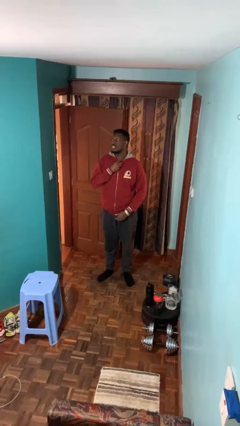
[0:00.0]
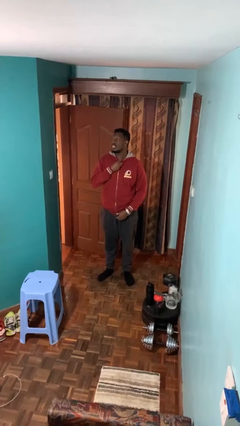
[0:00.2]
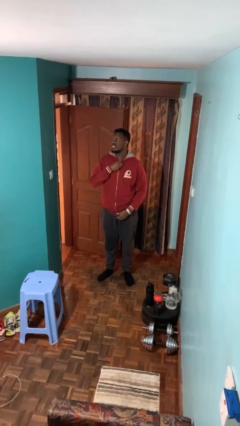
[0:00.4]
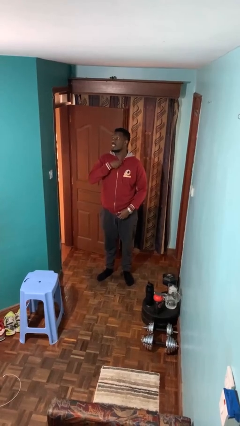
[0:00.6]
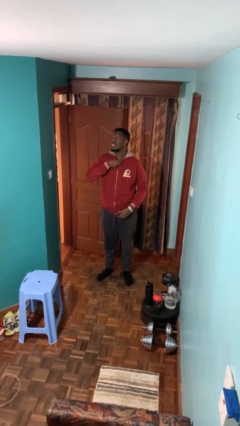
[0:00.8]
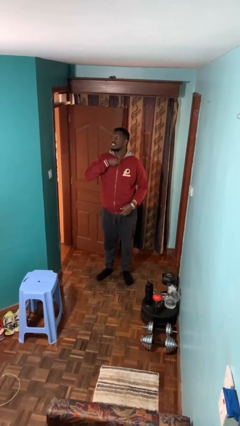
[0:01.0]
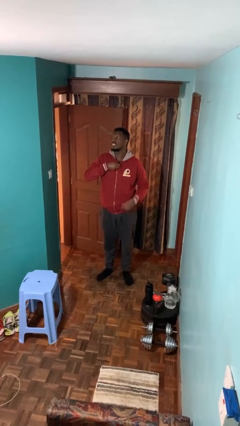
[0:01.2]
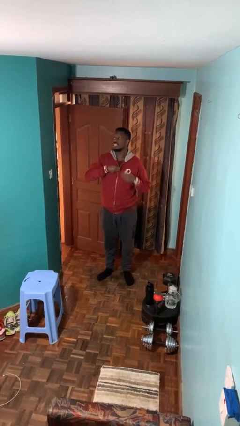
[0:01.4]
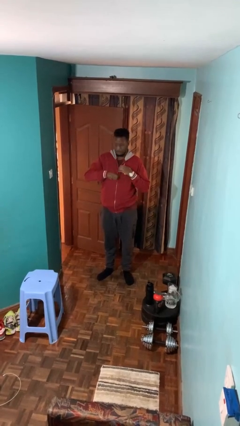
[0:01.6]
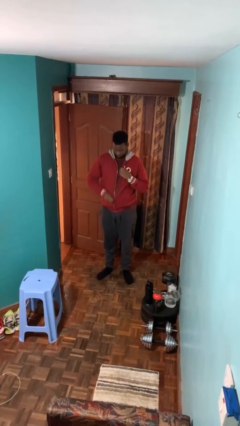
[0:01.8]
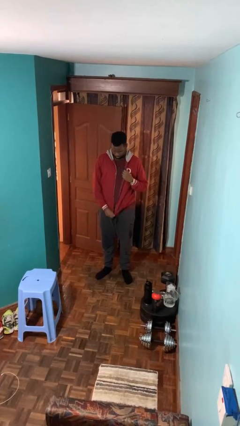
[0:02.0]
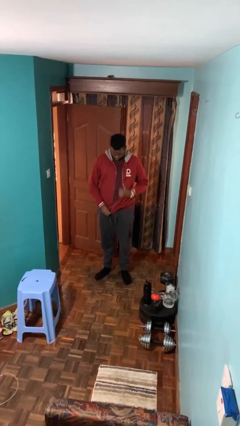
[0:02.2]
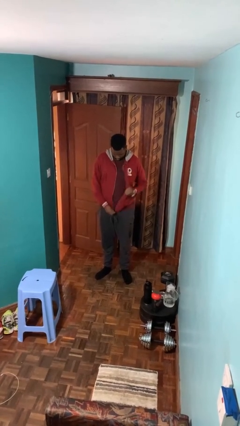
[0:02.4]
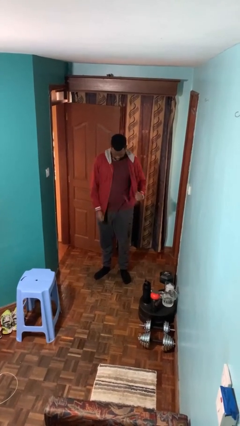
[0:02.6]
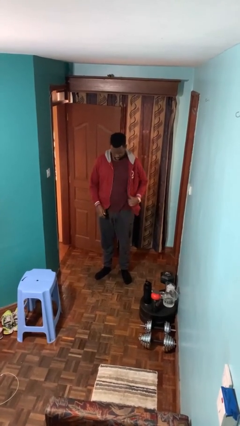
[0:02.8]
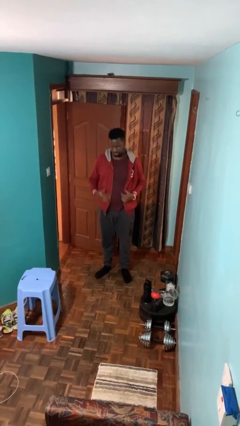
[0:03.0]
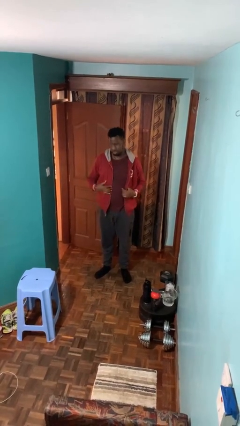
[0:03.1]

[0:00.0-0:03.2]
person unzips jacket

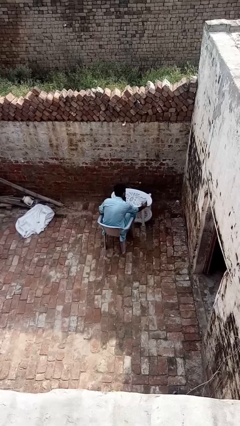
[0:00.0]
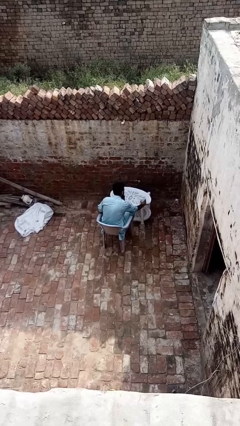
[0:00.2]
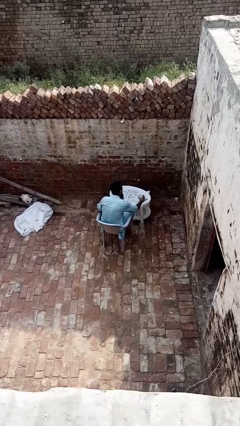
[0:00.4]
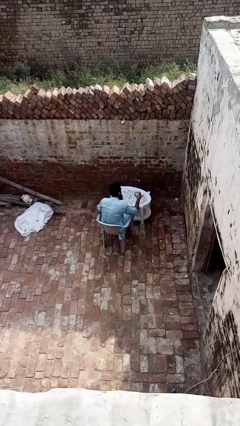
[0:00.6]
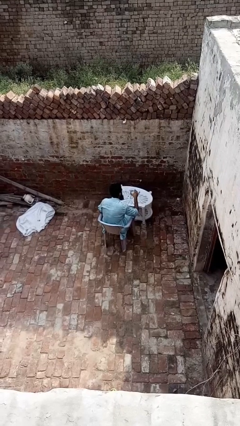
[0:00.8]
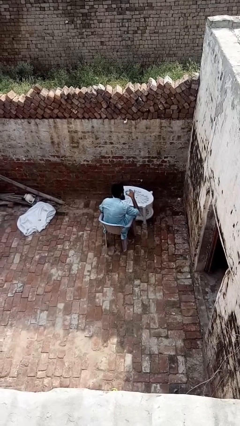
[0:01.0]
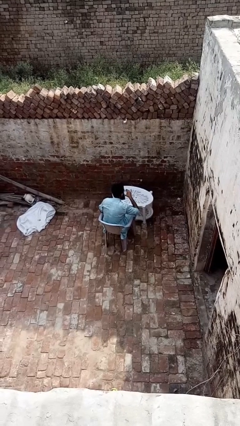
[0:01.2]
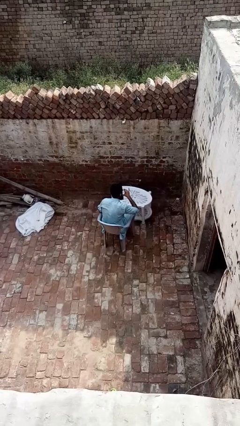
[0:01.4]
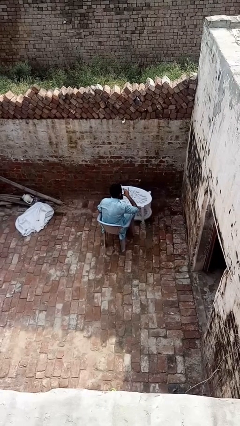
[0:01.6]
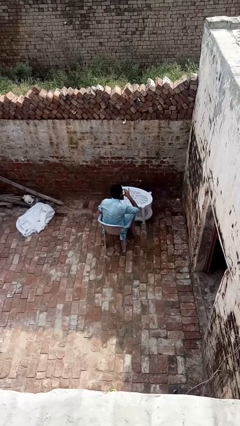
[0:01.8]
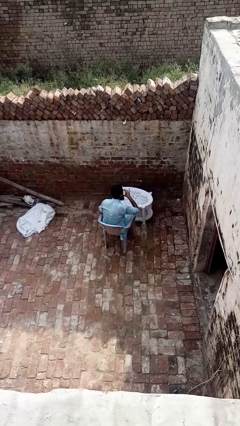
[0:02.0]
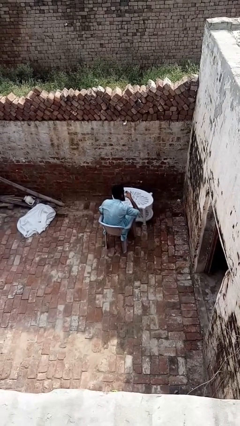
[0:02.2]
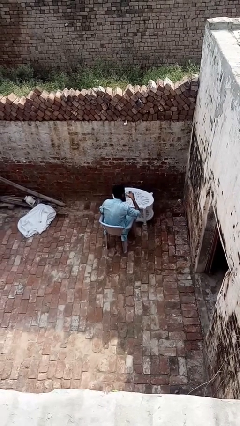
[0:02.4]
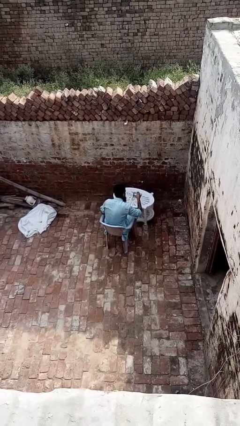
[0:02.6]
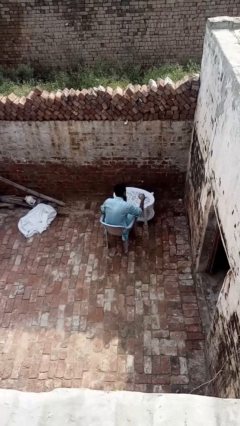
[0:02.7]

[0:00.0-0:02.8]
person drinks from cup

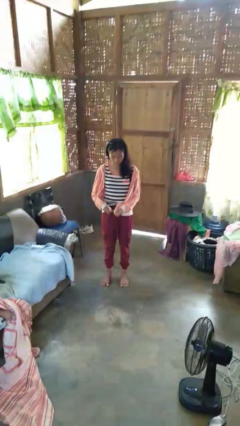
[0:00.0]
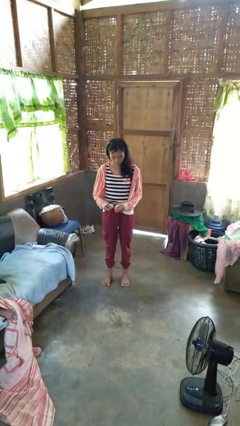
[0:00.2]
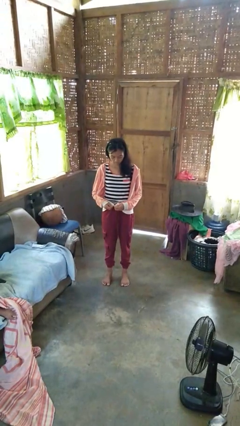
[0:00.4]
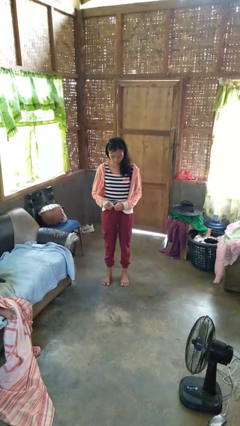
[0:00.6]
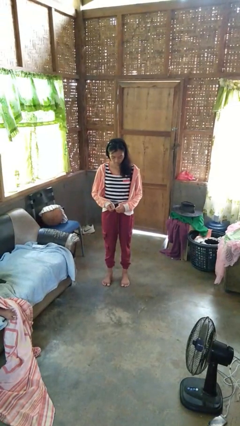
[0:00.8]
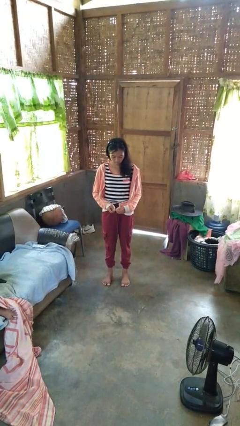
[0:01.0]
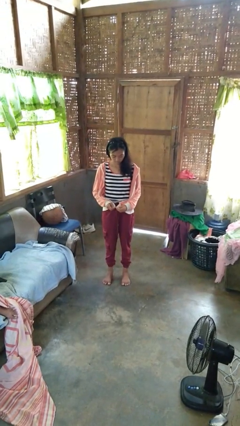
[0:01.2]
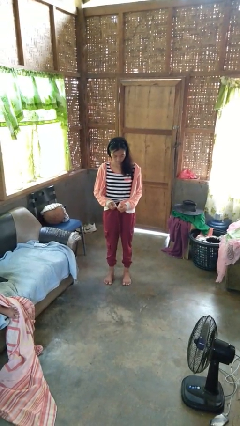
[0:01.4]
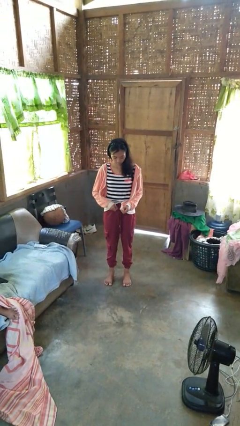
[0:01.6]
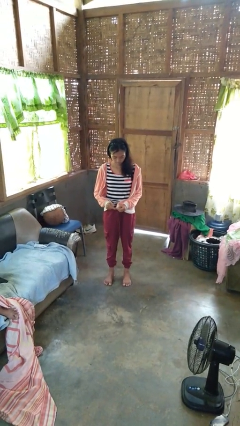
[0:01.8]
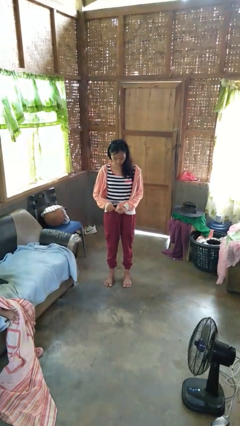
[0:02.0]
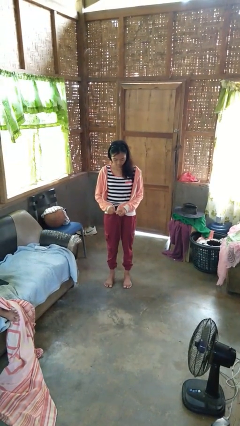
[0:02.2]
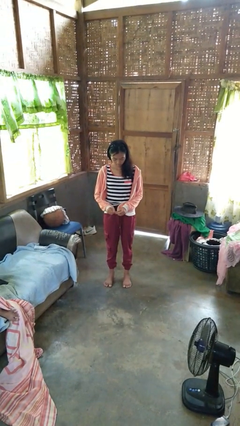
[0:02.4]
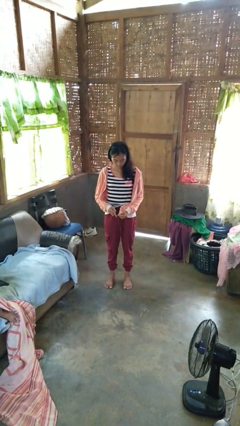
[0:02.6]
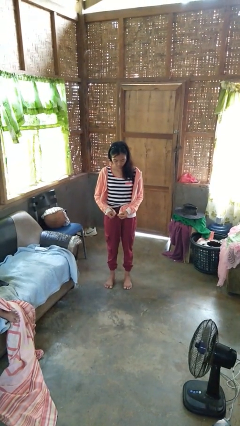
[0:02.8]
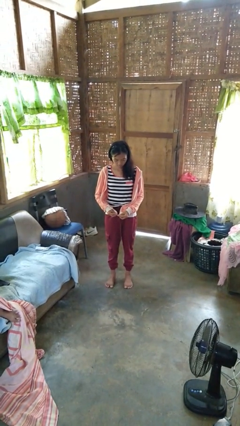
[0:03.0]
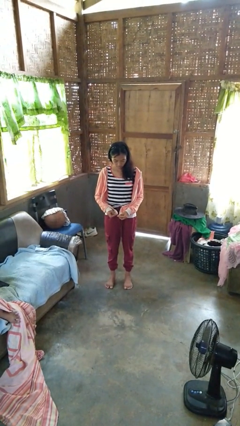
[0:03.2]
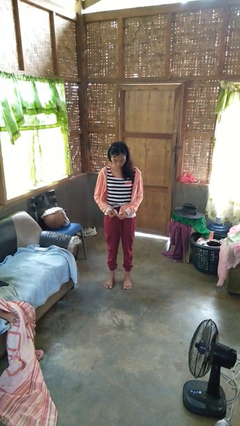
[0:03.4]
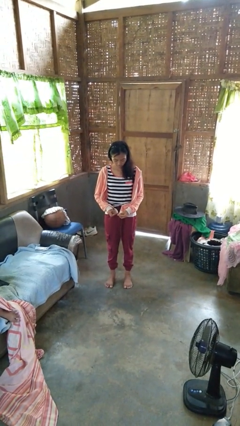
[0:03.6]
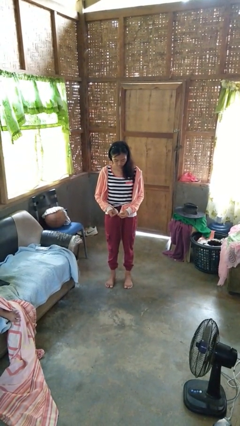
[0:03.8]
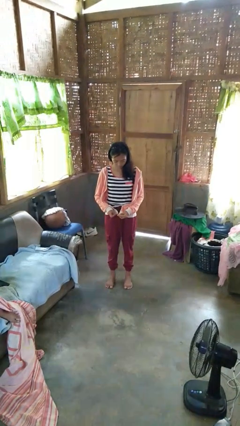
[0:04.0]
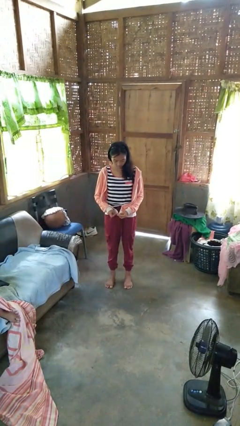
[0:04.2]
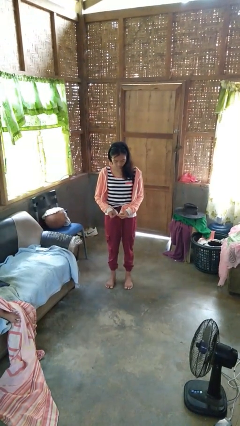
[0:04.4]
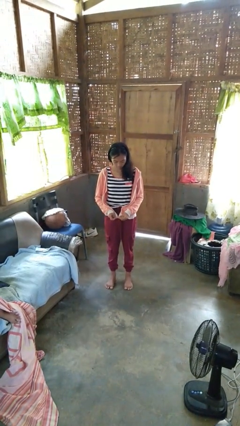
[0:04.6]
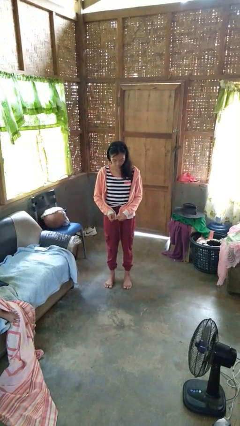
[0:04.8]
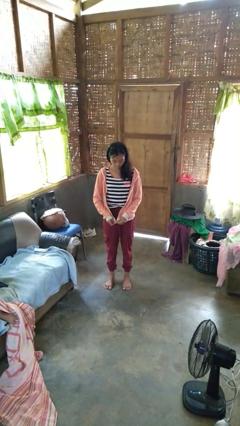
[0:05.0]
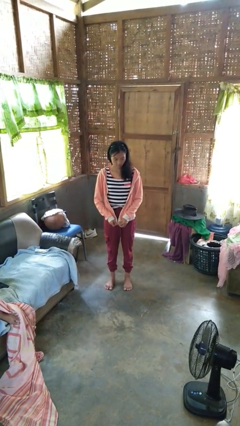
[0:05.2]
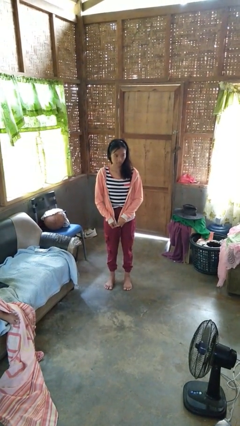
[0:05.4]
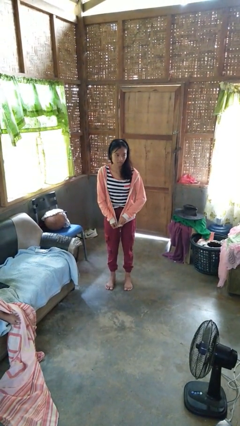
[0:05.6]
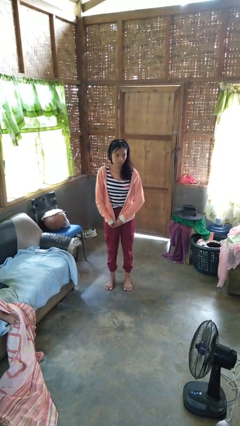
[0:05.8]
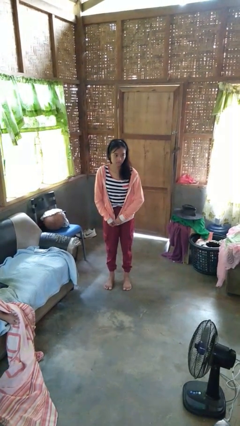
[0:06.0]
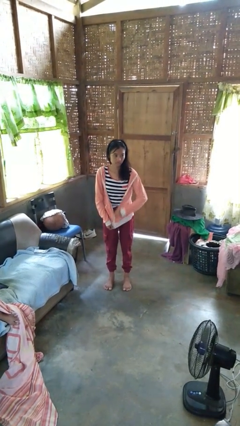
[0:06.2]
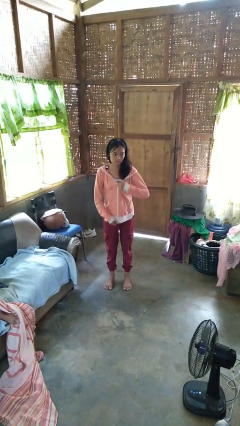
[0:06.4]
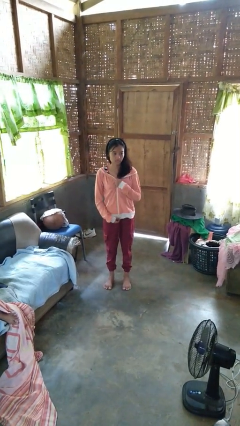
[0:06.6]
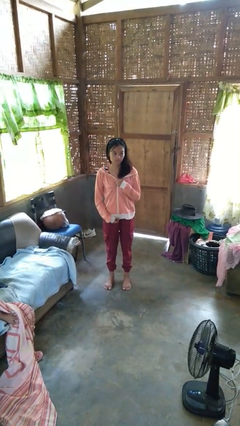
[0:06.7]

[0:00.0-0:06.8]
person zips up jacket

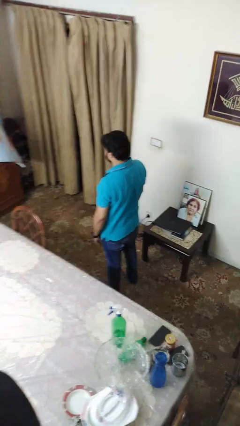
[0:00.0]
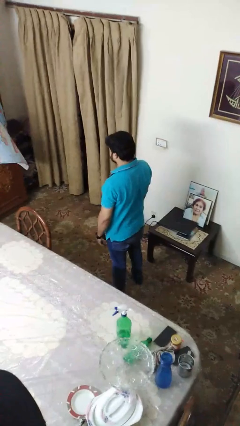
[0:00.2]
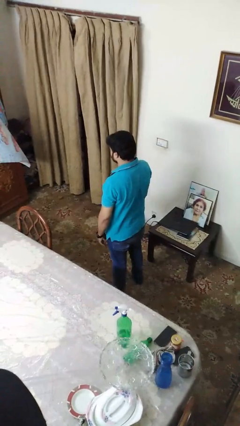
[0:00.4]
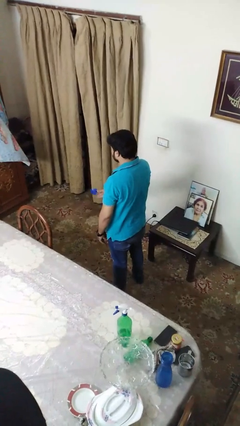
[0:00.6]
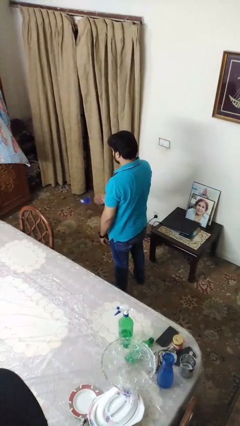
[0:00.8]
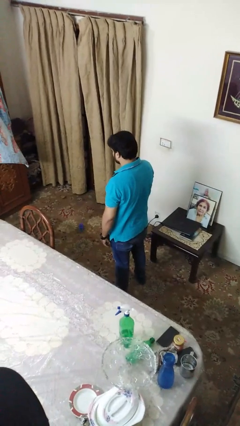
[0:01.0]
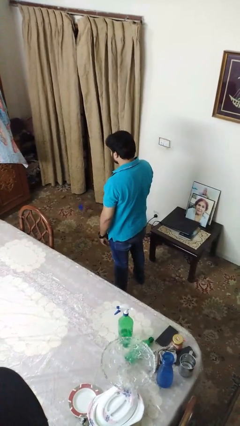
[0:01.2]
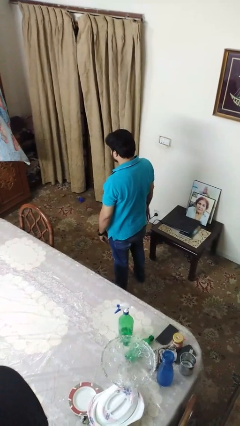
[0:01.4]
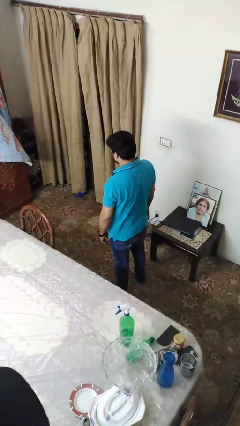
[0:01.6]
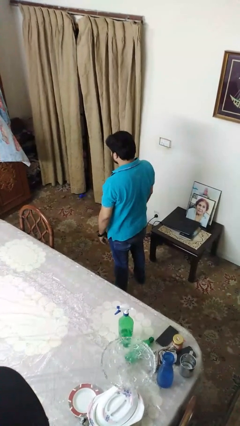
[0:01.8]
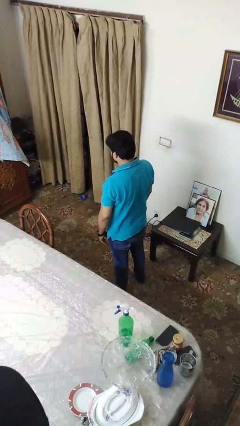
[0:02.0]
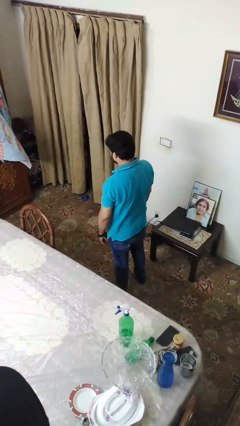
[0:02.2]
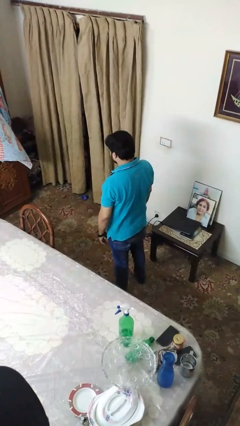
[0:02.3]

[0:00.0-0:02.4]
person throws object to ground

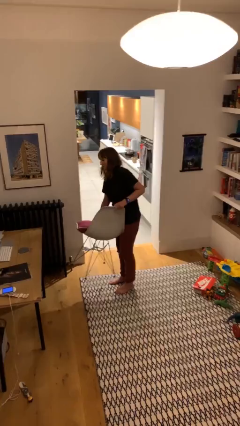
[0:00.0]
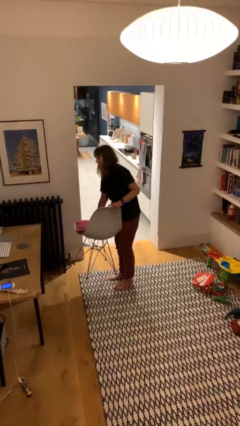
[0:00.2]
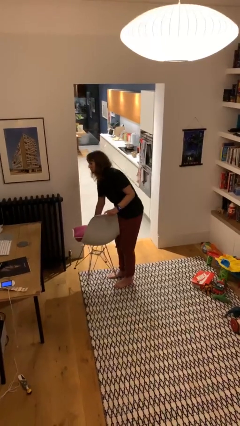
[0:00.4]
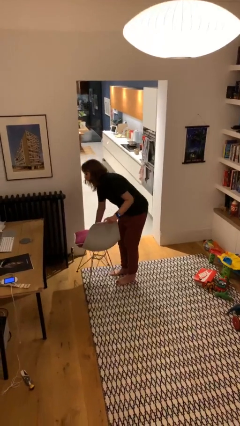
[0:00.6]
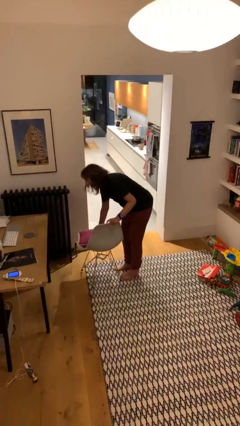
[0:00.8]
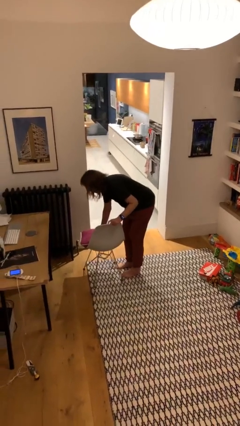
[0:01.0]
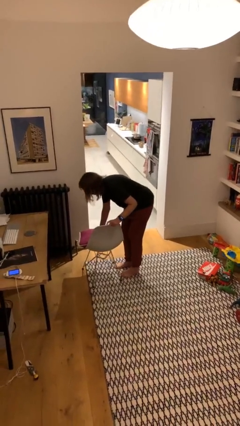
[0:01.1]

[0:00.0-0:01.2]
person puts down object on floor

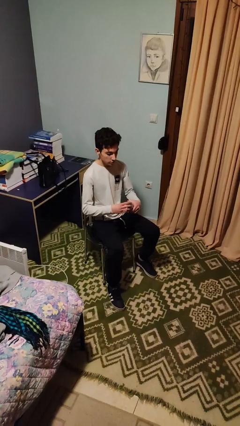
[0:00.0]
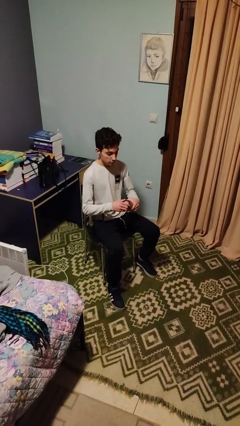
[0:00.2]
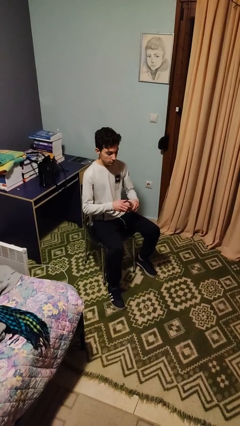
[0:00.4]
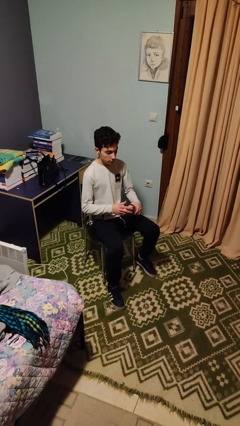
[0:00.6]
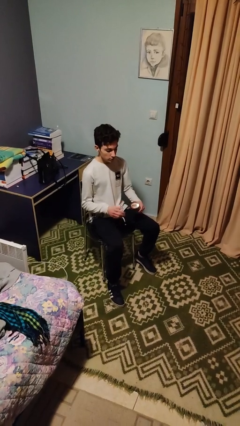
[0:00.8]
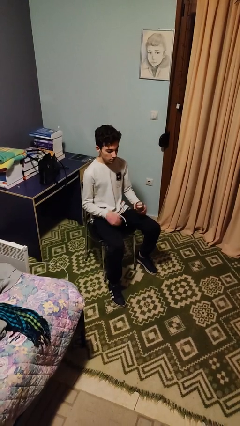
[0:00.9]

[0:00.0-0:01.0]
person closes jar

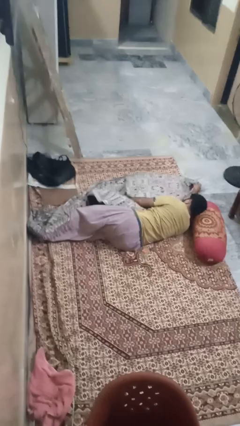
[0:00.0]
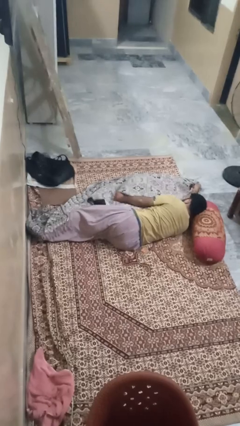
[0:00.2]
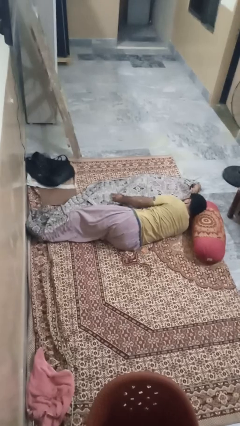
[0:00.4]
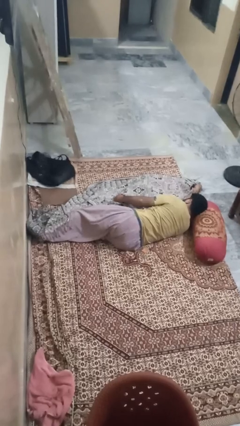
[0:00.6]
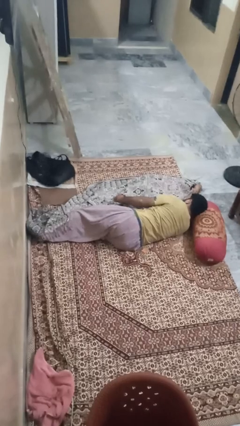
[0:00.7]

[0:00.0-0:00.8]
person uncovers with blanket
